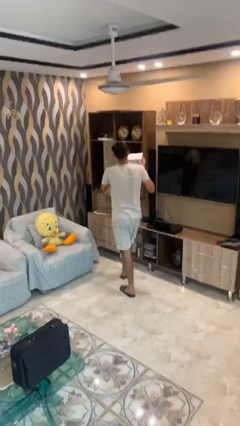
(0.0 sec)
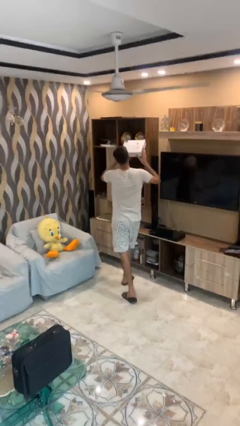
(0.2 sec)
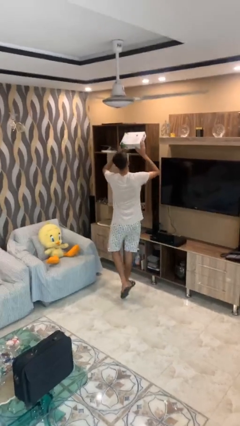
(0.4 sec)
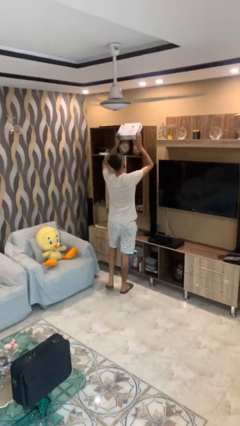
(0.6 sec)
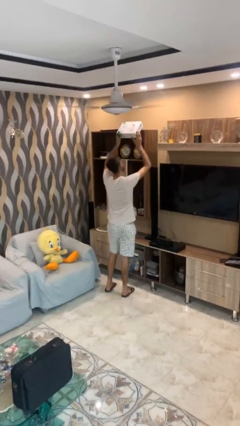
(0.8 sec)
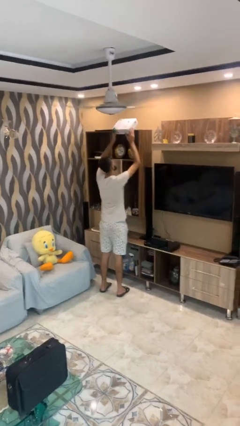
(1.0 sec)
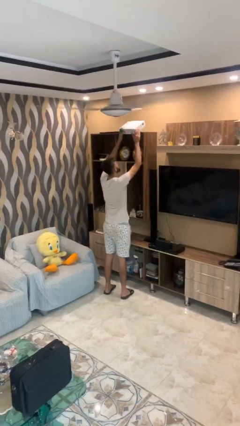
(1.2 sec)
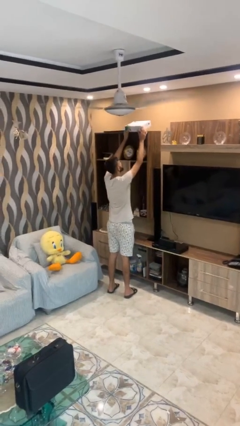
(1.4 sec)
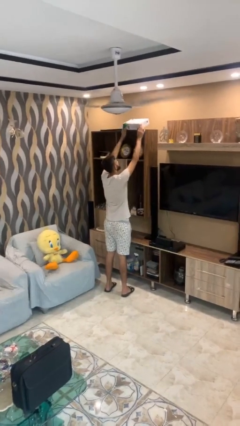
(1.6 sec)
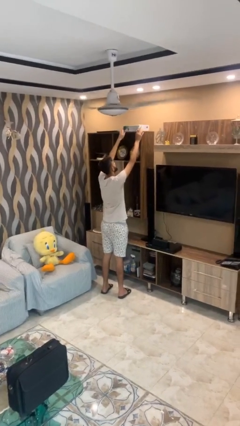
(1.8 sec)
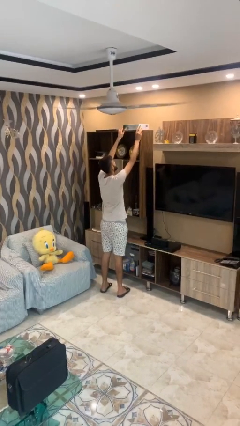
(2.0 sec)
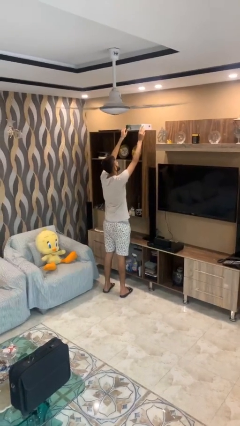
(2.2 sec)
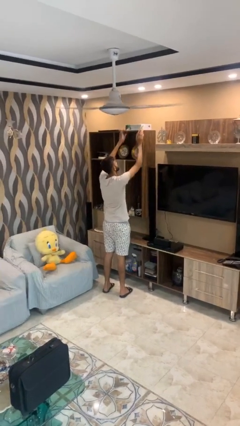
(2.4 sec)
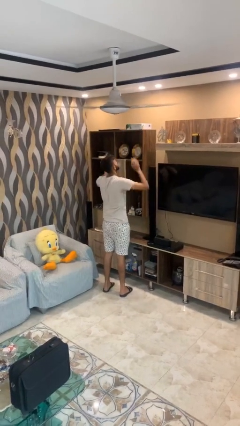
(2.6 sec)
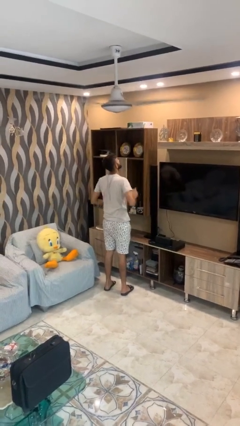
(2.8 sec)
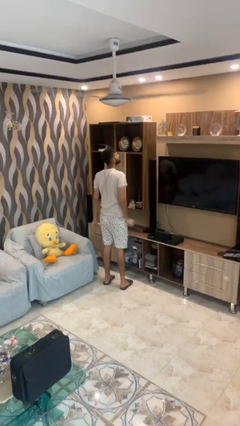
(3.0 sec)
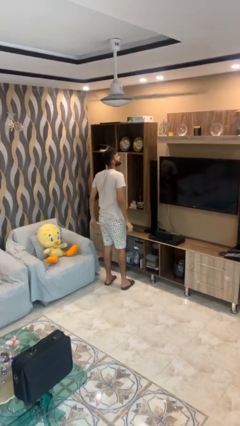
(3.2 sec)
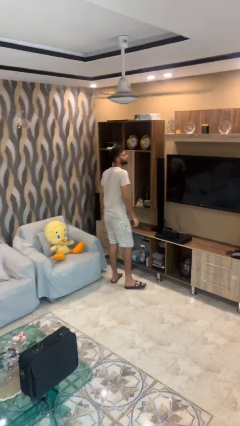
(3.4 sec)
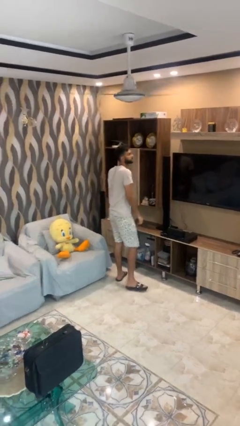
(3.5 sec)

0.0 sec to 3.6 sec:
person puts down object on shelf

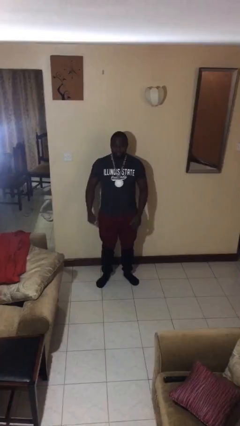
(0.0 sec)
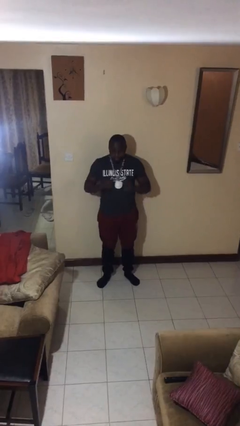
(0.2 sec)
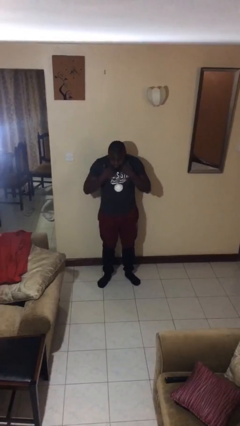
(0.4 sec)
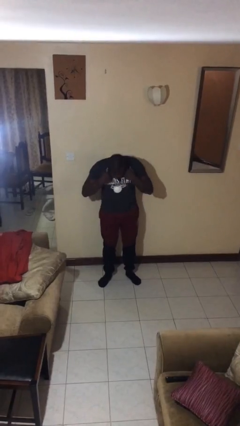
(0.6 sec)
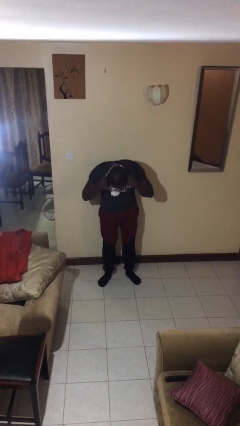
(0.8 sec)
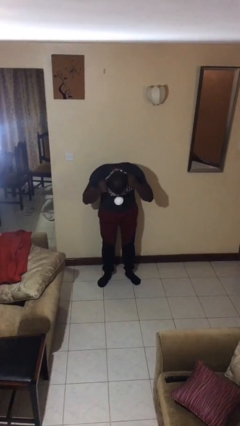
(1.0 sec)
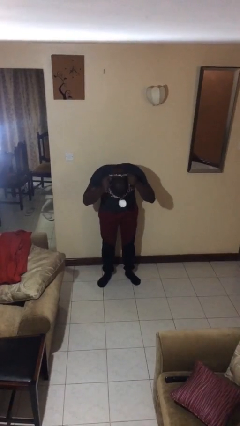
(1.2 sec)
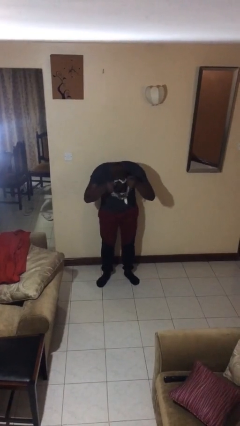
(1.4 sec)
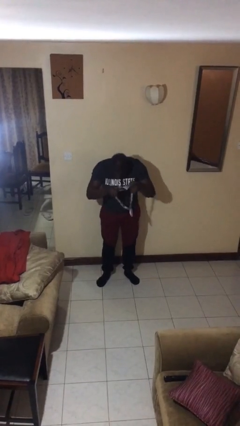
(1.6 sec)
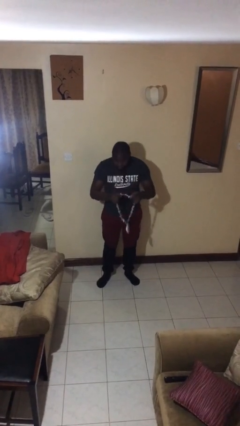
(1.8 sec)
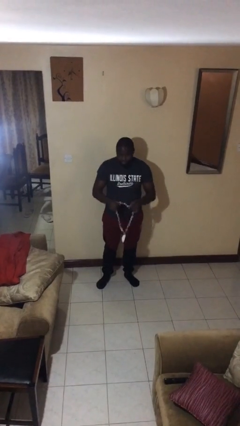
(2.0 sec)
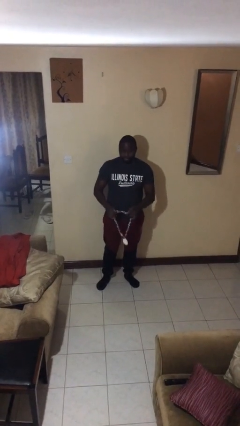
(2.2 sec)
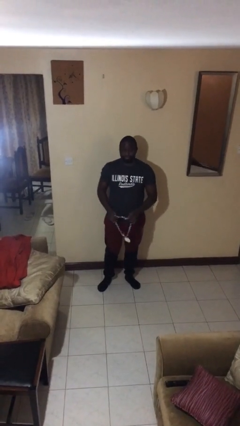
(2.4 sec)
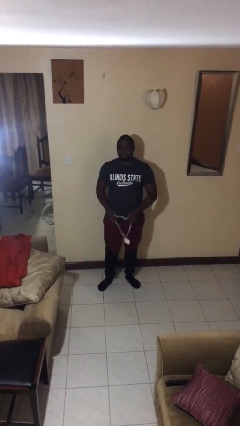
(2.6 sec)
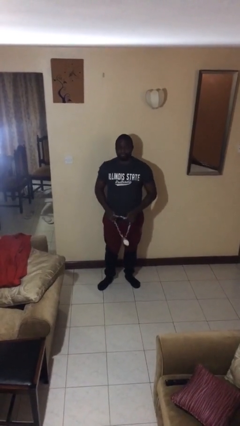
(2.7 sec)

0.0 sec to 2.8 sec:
person takes off necklace

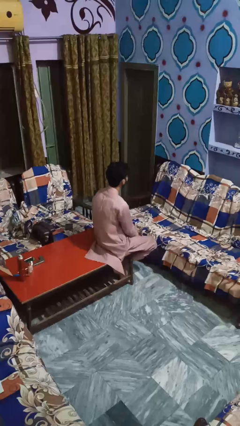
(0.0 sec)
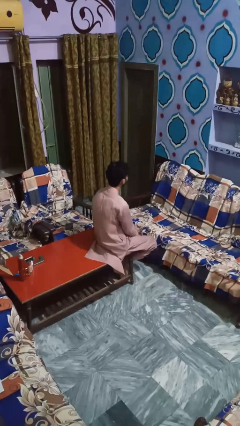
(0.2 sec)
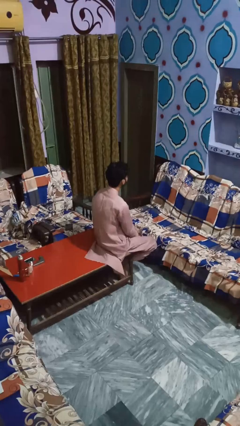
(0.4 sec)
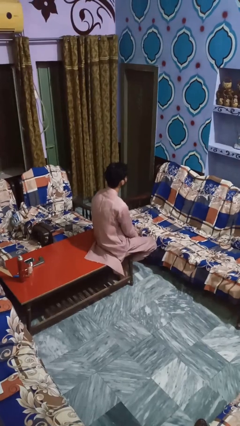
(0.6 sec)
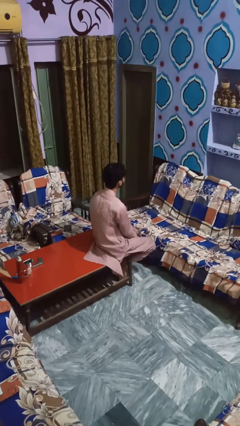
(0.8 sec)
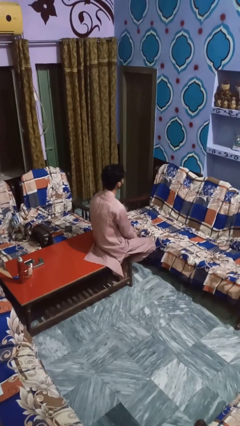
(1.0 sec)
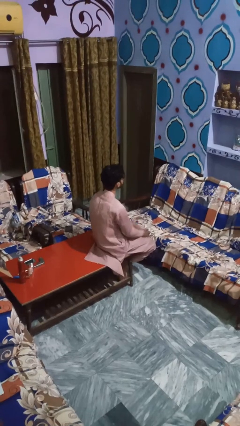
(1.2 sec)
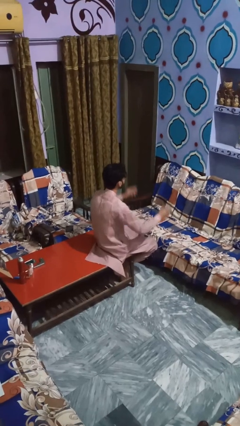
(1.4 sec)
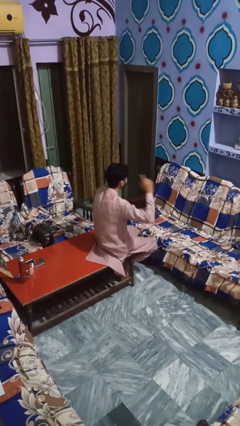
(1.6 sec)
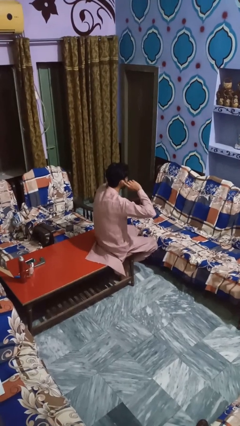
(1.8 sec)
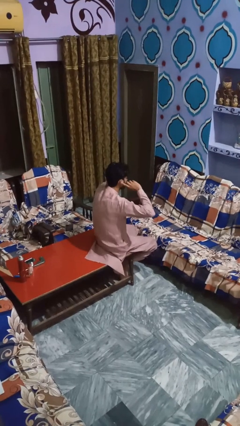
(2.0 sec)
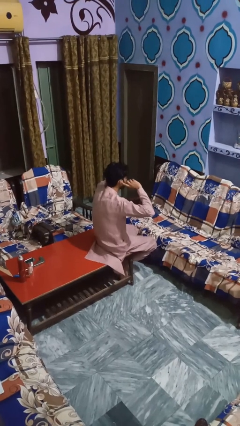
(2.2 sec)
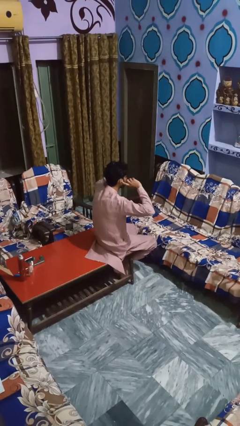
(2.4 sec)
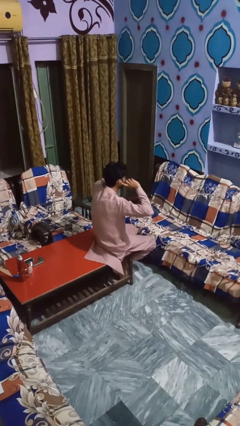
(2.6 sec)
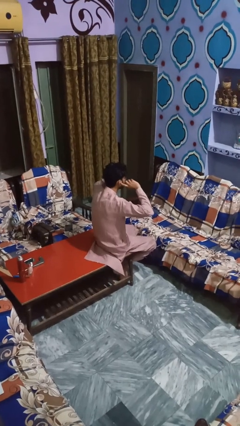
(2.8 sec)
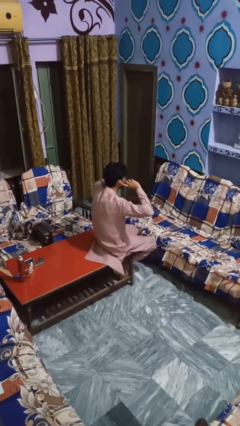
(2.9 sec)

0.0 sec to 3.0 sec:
person puts fingers in ear

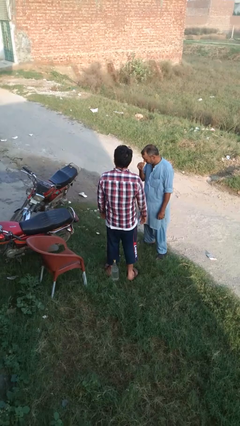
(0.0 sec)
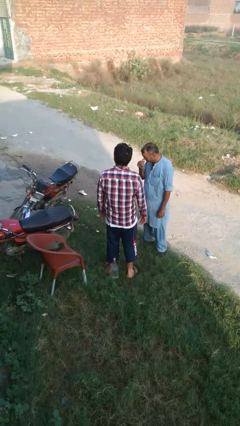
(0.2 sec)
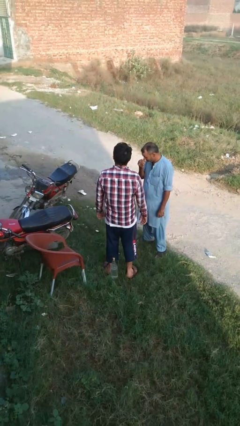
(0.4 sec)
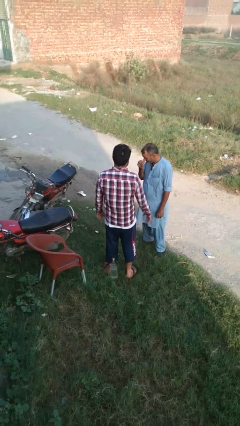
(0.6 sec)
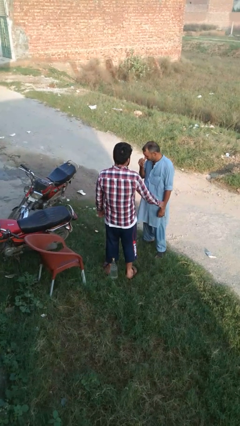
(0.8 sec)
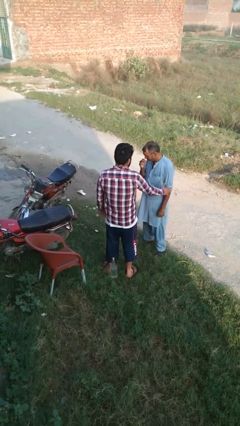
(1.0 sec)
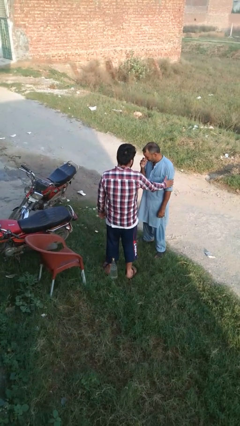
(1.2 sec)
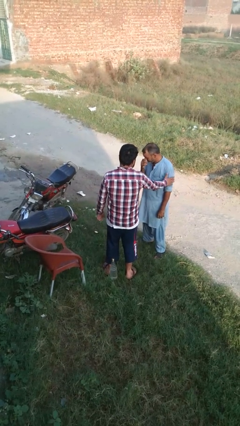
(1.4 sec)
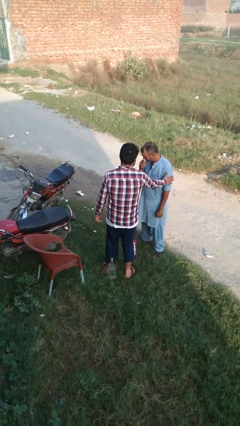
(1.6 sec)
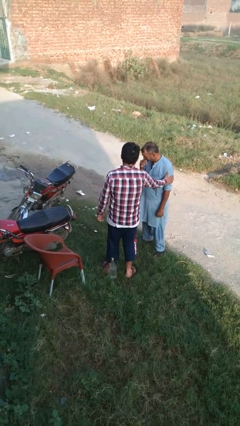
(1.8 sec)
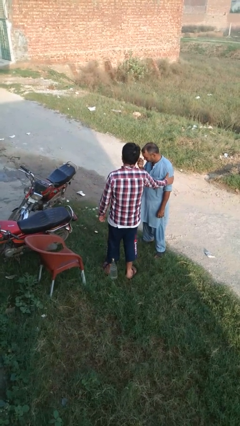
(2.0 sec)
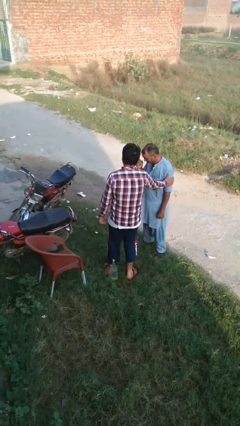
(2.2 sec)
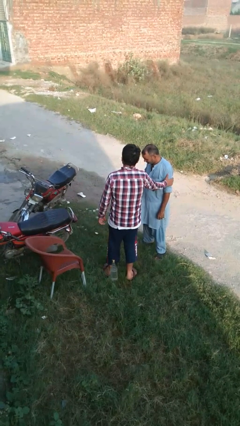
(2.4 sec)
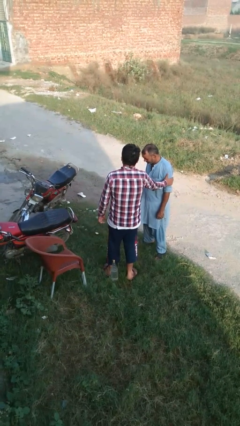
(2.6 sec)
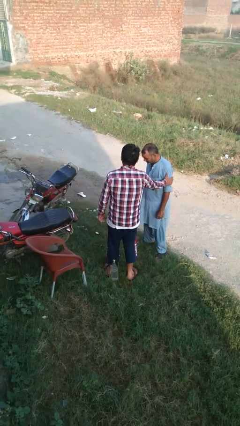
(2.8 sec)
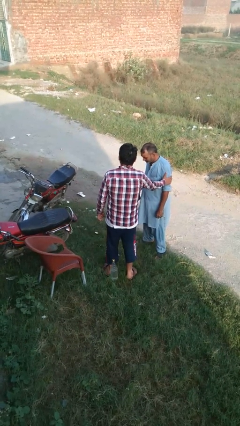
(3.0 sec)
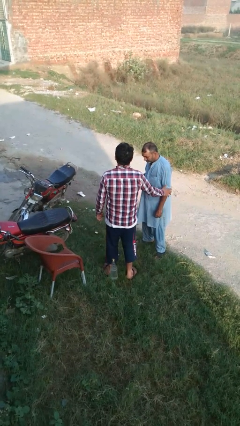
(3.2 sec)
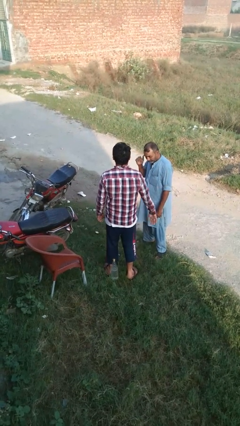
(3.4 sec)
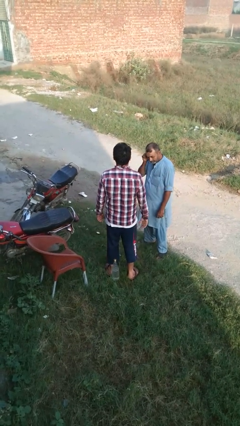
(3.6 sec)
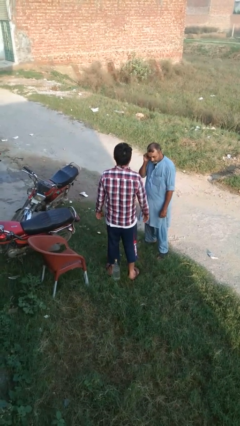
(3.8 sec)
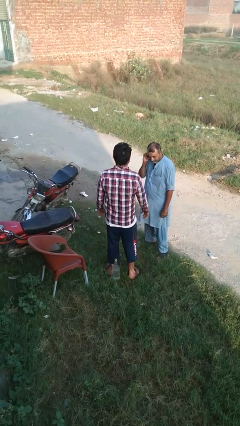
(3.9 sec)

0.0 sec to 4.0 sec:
person grabs person by bicep

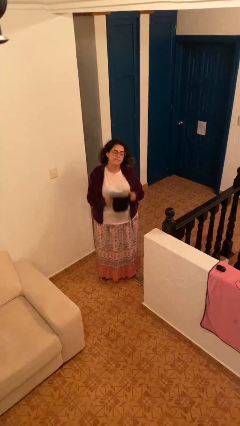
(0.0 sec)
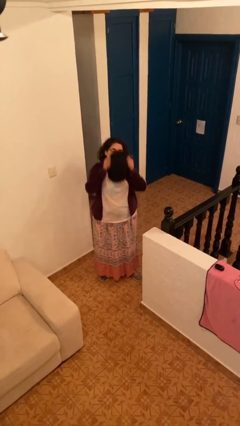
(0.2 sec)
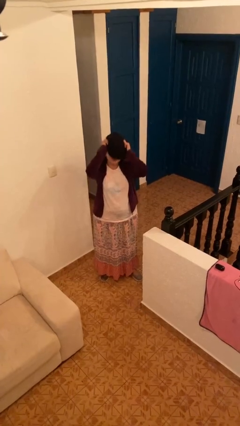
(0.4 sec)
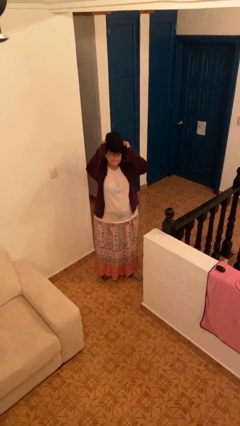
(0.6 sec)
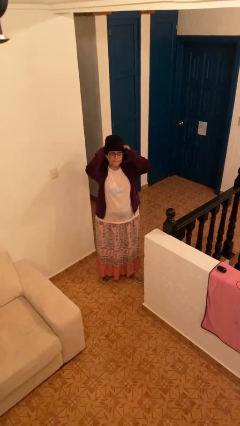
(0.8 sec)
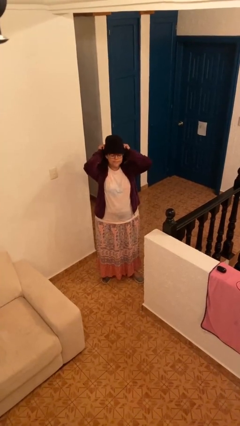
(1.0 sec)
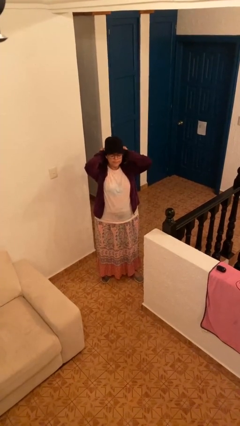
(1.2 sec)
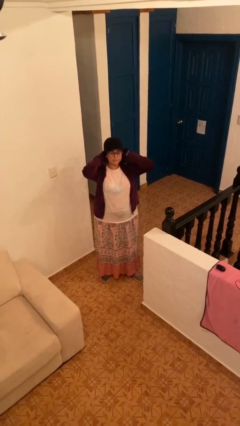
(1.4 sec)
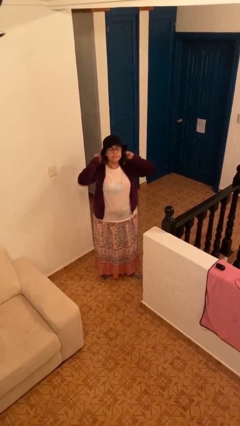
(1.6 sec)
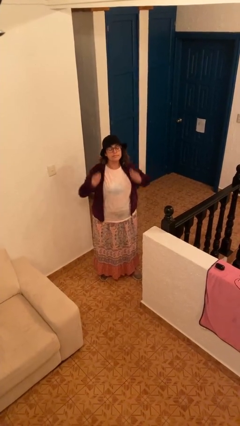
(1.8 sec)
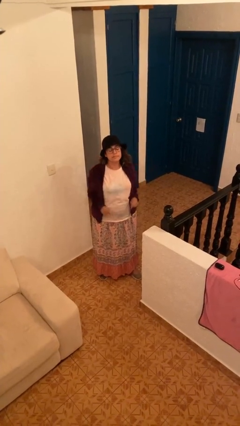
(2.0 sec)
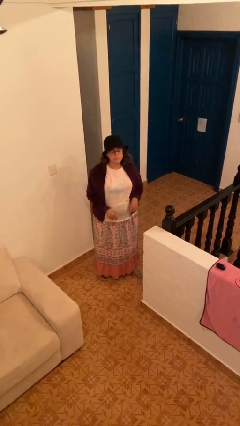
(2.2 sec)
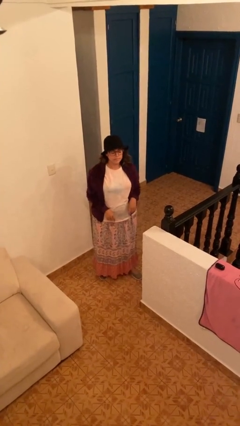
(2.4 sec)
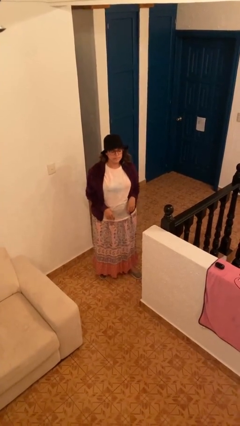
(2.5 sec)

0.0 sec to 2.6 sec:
person puts on hat

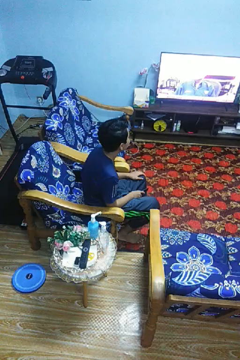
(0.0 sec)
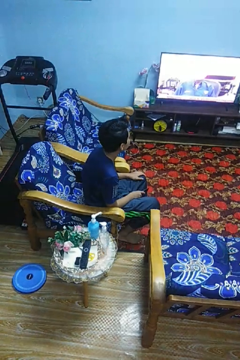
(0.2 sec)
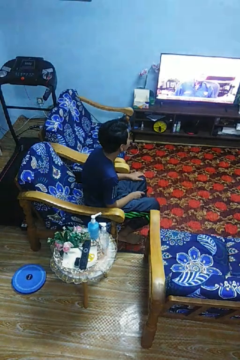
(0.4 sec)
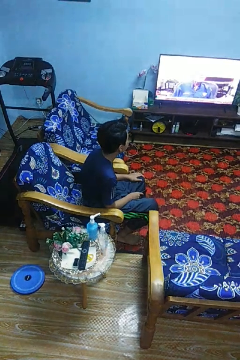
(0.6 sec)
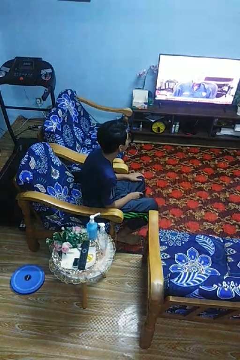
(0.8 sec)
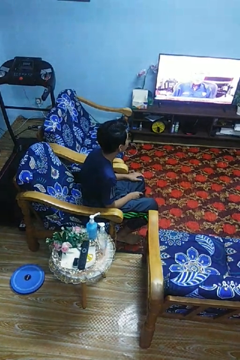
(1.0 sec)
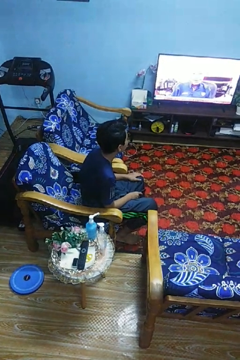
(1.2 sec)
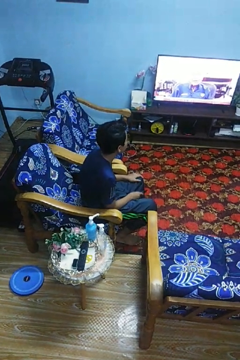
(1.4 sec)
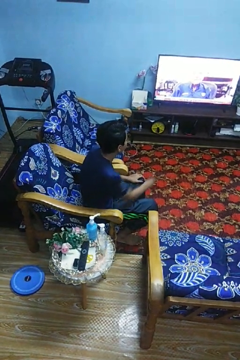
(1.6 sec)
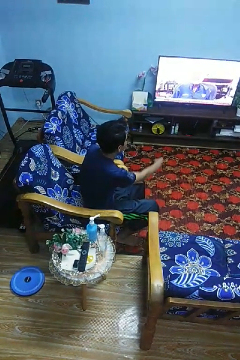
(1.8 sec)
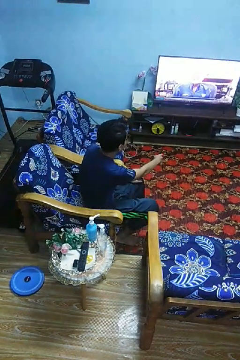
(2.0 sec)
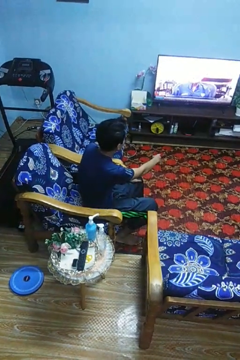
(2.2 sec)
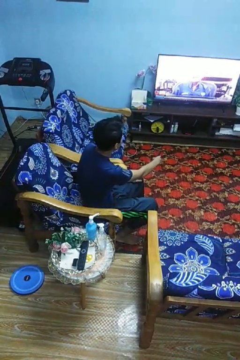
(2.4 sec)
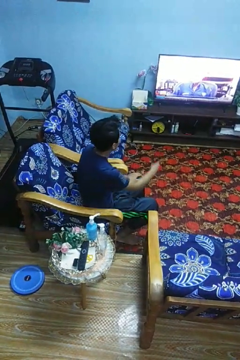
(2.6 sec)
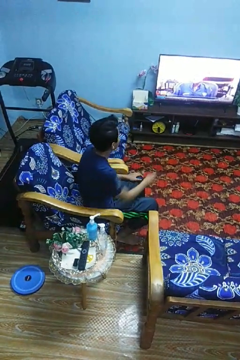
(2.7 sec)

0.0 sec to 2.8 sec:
person uses television remote
